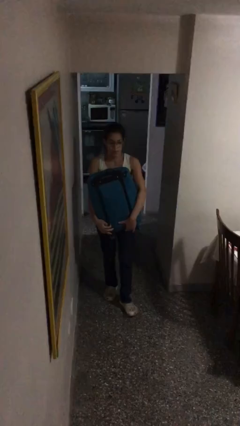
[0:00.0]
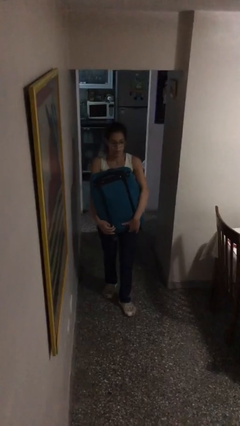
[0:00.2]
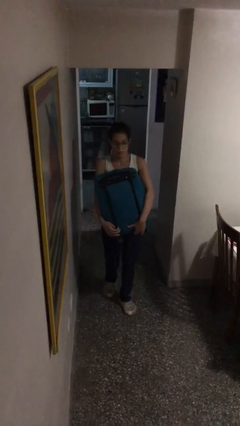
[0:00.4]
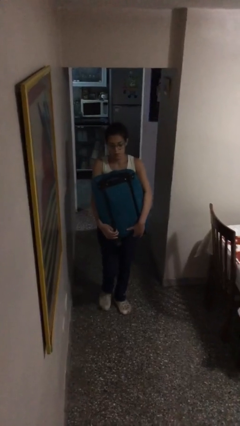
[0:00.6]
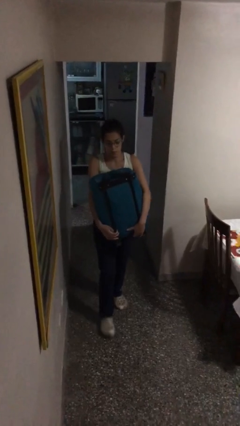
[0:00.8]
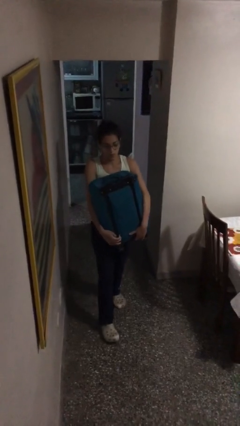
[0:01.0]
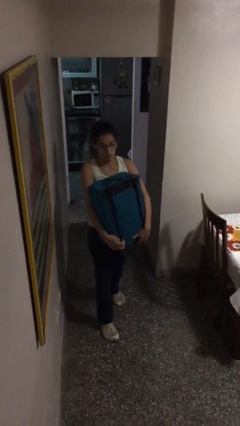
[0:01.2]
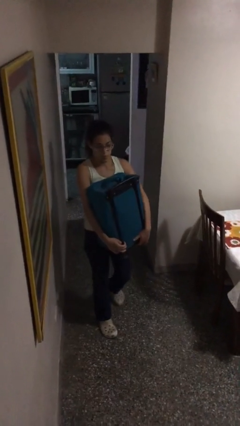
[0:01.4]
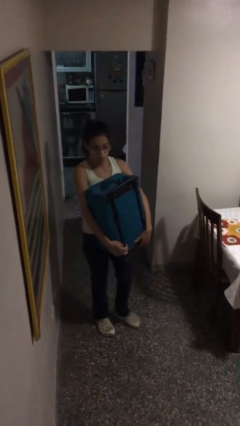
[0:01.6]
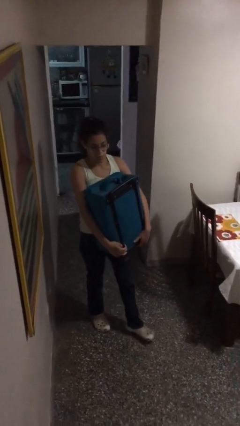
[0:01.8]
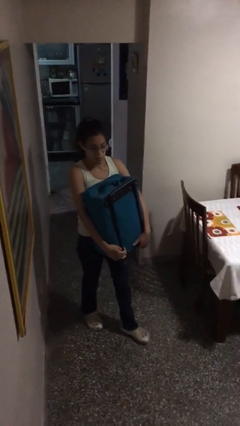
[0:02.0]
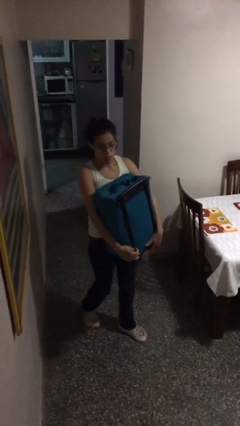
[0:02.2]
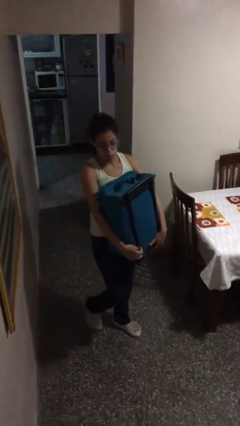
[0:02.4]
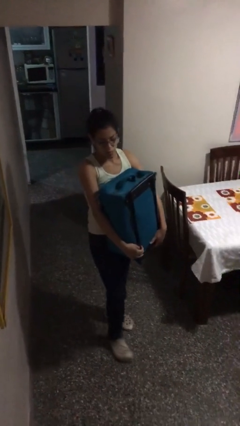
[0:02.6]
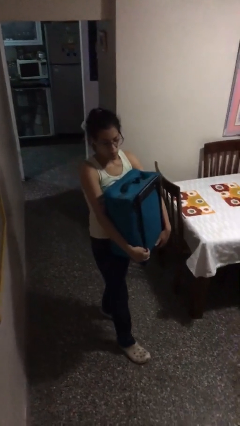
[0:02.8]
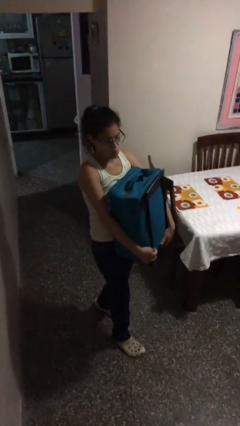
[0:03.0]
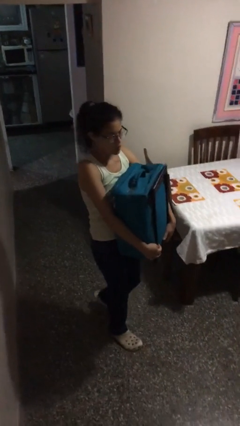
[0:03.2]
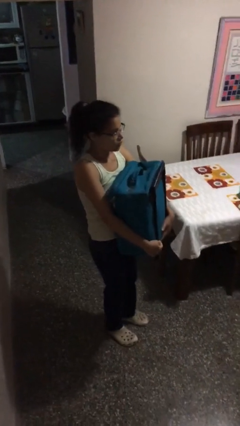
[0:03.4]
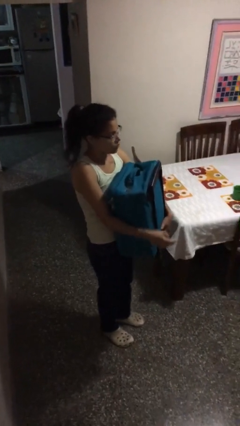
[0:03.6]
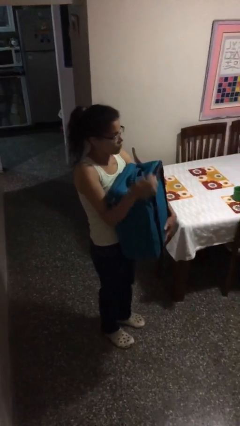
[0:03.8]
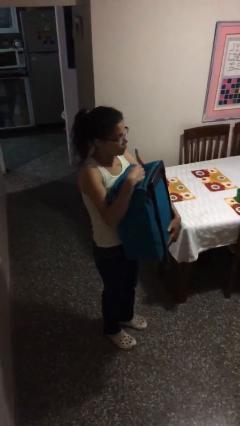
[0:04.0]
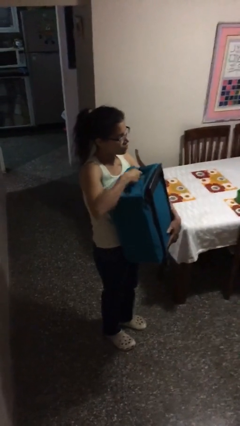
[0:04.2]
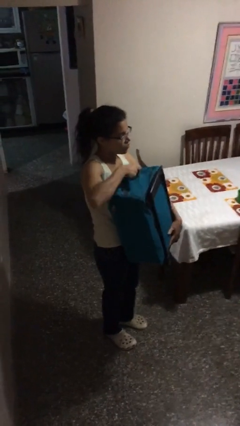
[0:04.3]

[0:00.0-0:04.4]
person carries heavy object

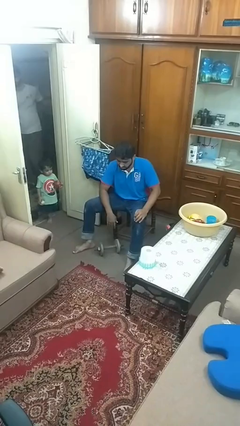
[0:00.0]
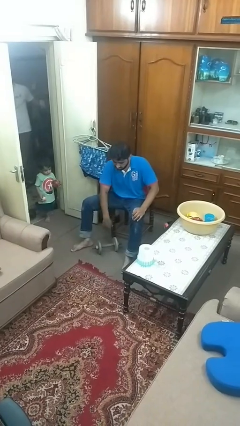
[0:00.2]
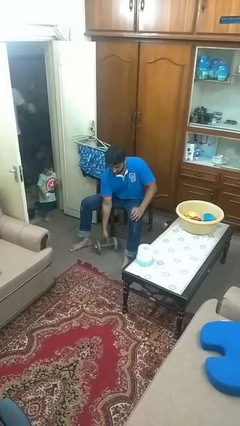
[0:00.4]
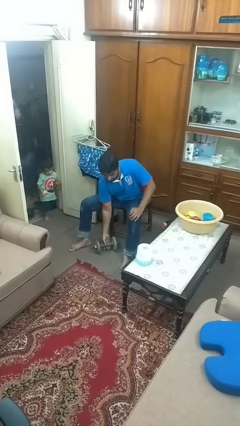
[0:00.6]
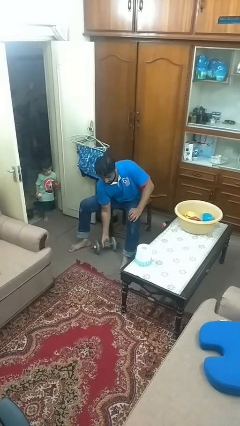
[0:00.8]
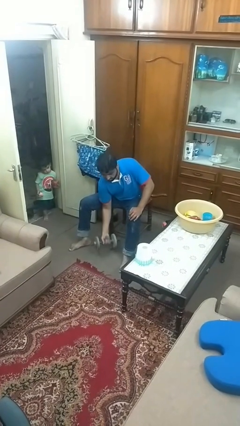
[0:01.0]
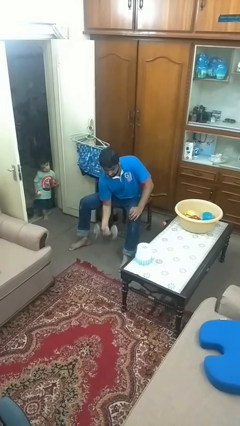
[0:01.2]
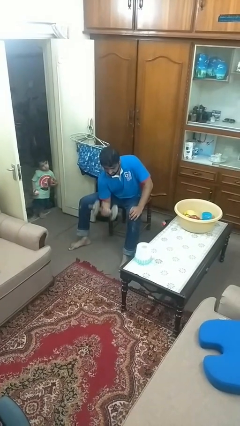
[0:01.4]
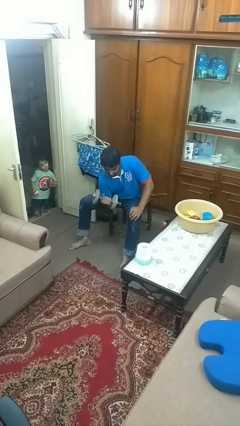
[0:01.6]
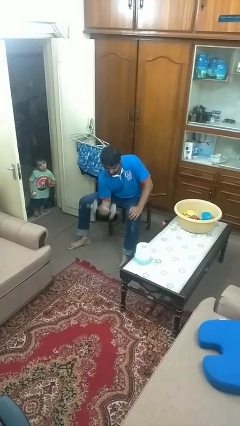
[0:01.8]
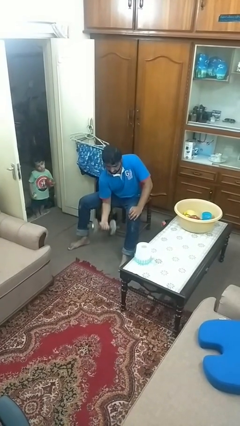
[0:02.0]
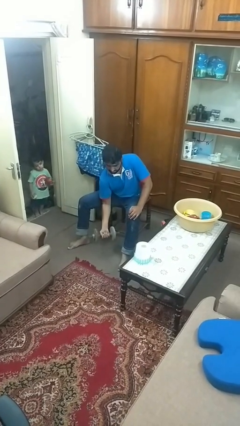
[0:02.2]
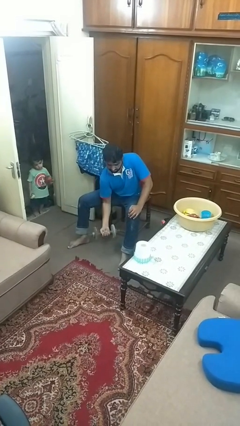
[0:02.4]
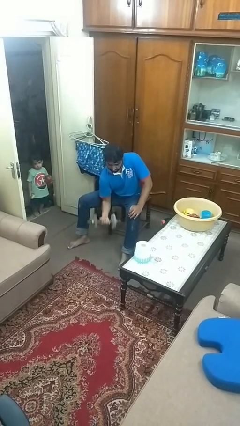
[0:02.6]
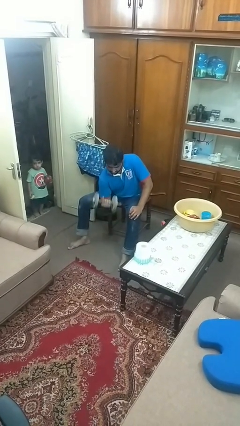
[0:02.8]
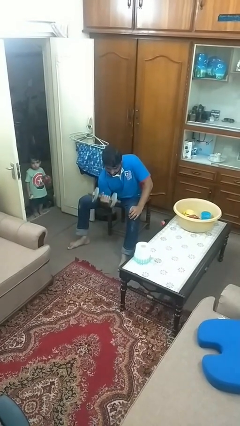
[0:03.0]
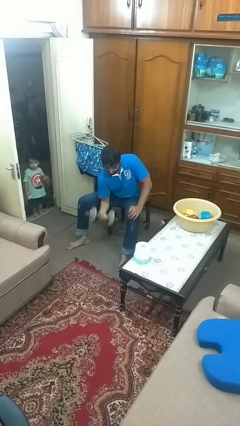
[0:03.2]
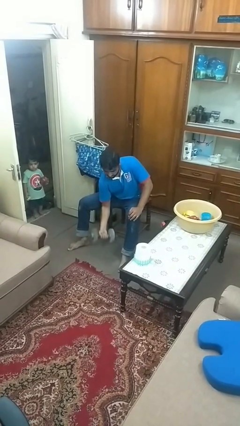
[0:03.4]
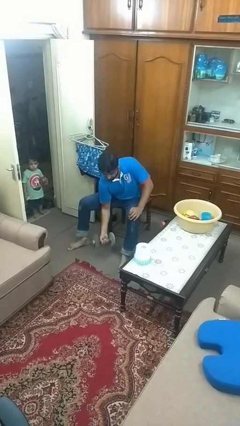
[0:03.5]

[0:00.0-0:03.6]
person lifts dumbbells

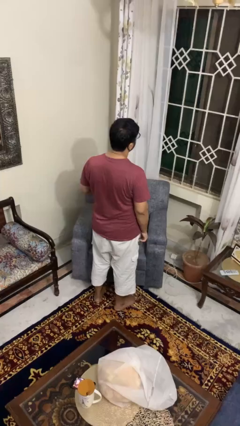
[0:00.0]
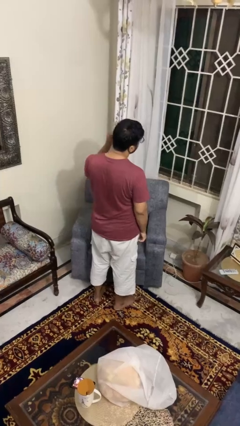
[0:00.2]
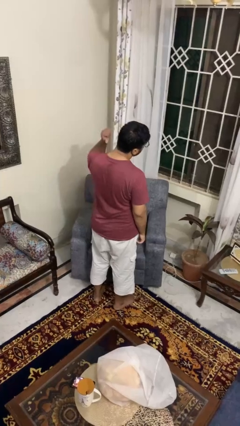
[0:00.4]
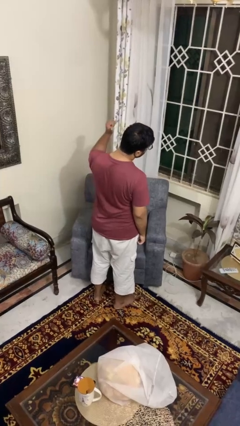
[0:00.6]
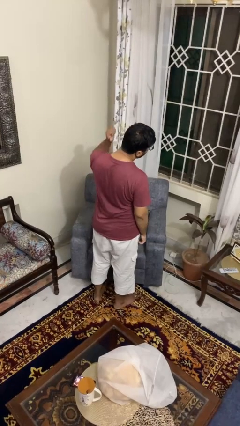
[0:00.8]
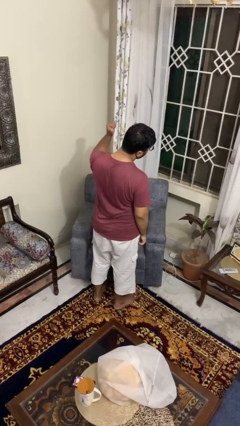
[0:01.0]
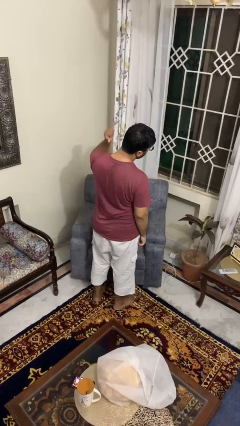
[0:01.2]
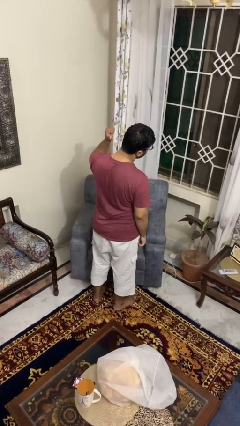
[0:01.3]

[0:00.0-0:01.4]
person gestures behind me

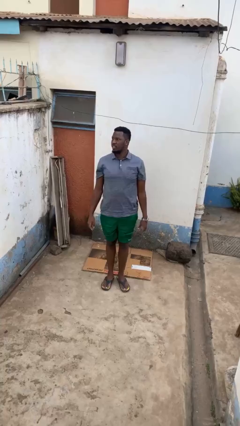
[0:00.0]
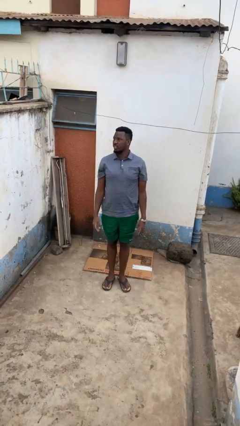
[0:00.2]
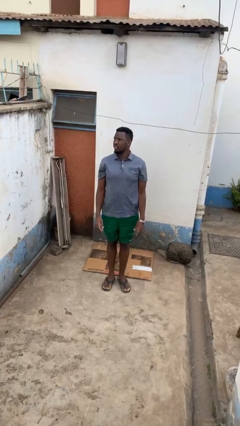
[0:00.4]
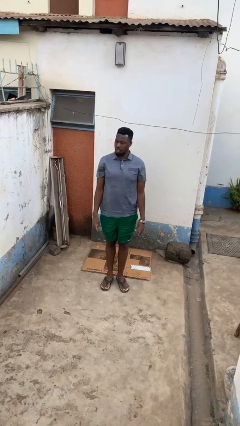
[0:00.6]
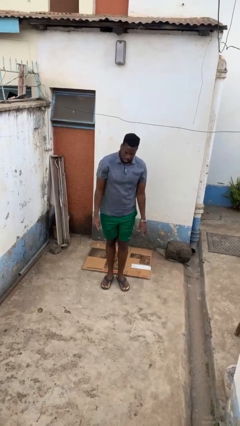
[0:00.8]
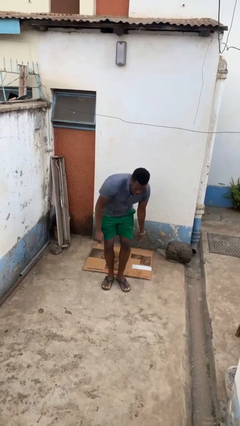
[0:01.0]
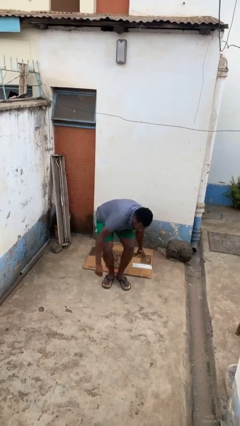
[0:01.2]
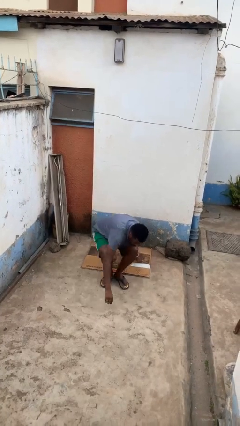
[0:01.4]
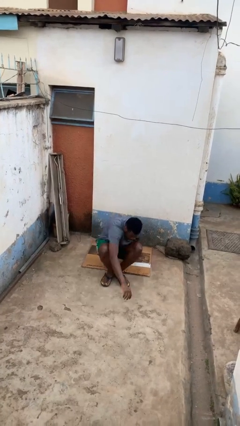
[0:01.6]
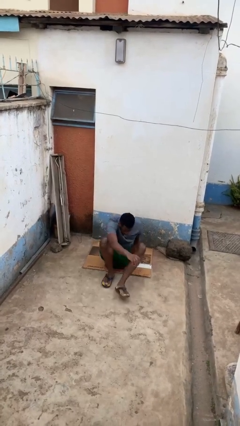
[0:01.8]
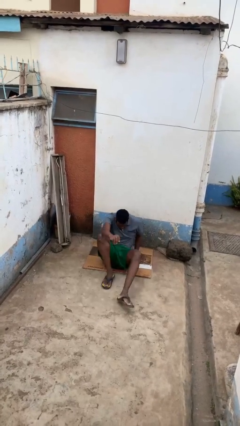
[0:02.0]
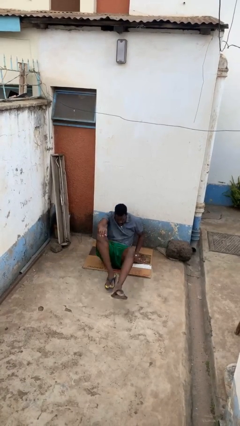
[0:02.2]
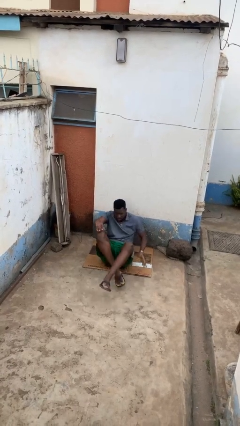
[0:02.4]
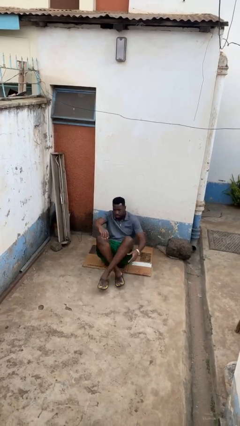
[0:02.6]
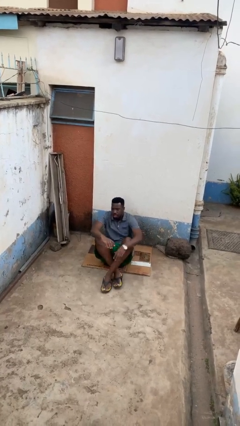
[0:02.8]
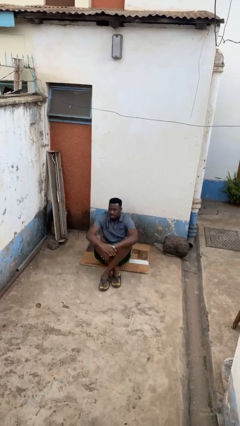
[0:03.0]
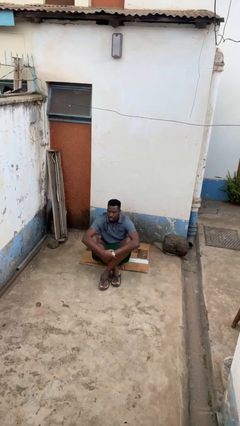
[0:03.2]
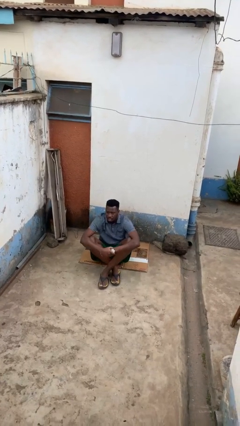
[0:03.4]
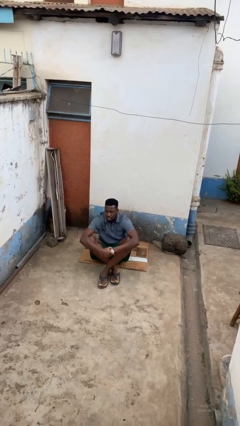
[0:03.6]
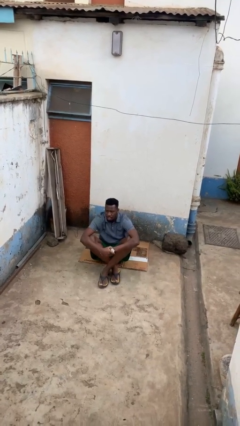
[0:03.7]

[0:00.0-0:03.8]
person sits crisscross

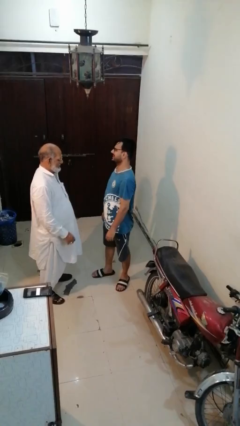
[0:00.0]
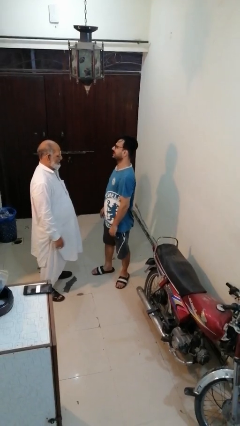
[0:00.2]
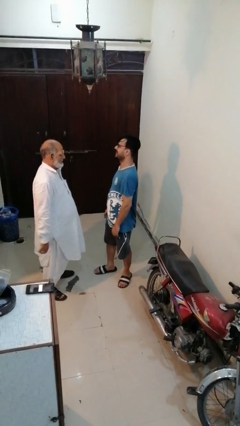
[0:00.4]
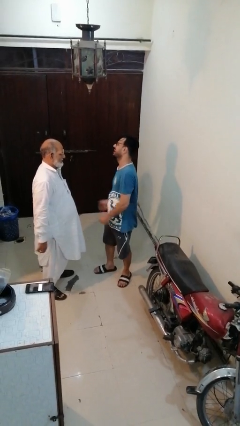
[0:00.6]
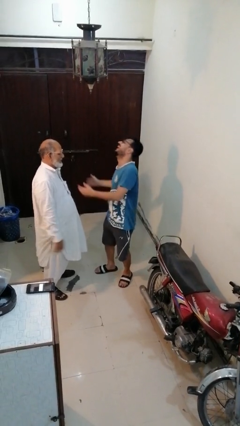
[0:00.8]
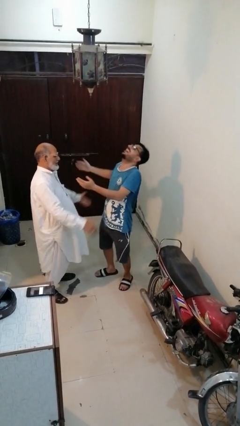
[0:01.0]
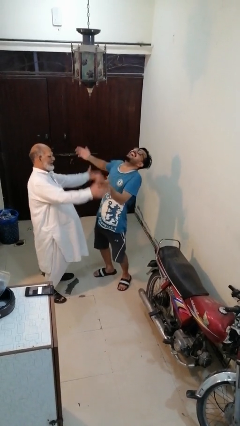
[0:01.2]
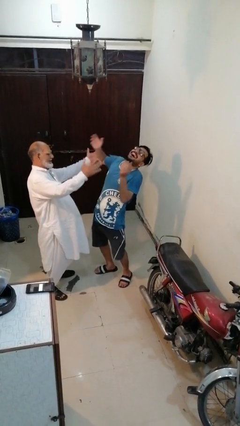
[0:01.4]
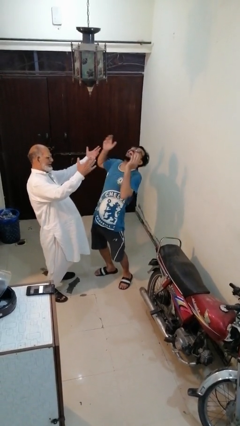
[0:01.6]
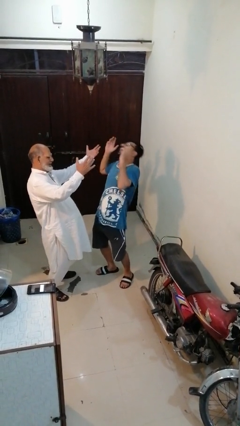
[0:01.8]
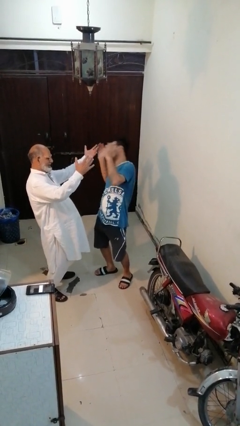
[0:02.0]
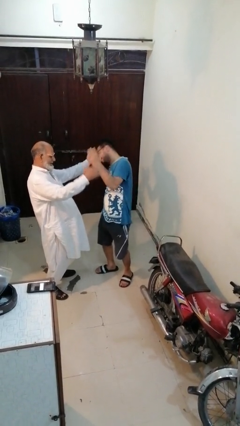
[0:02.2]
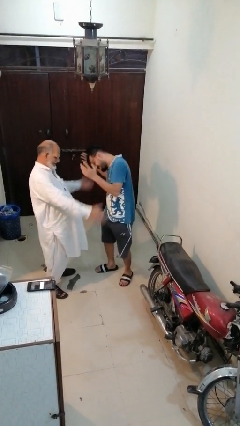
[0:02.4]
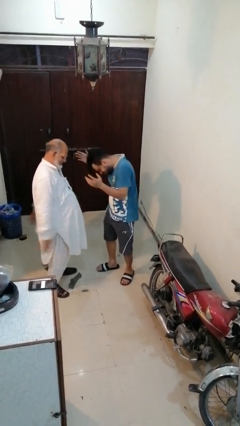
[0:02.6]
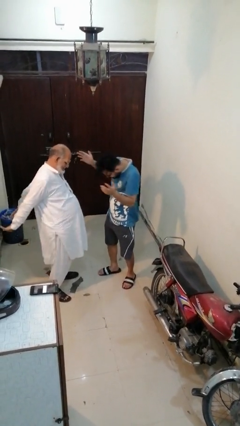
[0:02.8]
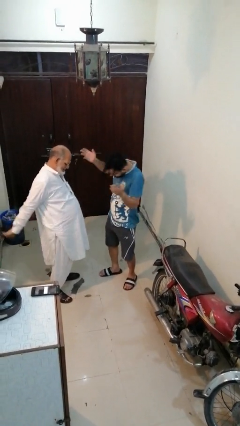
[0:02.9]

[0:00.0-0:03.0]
person laughs with person

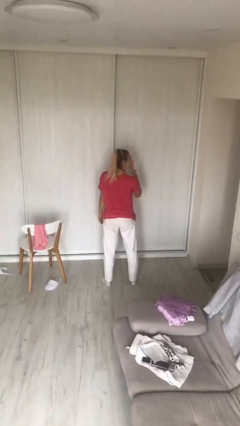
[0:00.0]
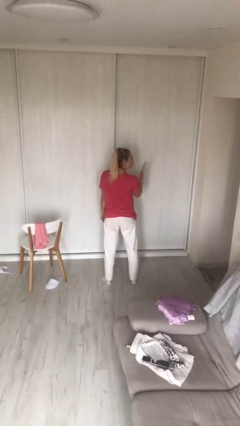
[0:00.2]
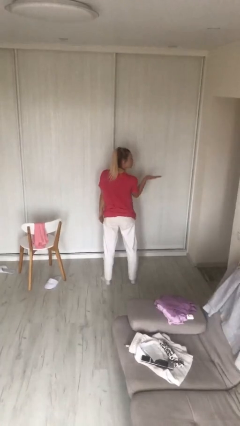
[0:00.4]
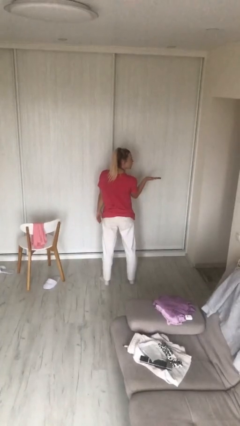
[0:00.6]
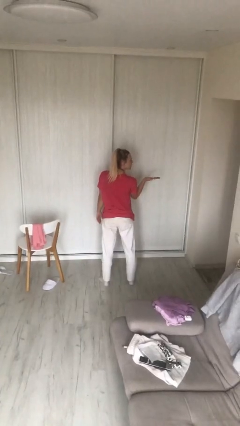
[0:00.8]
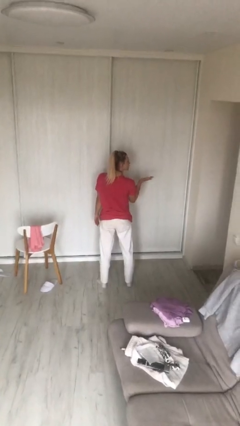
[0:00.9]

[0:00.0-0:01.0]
person gestures blow kiss
